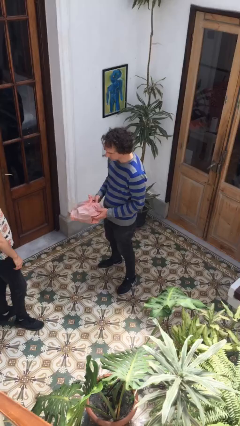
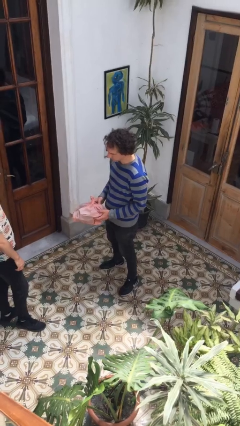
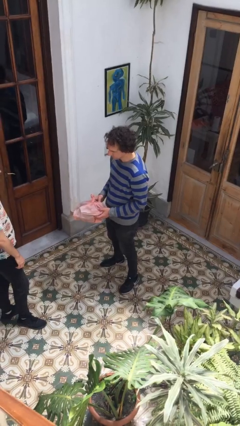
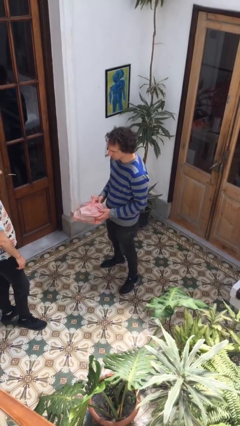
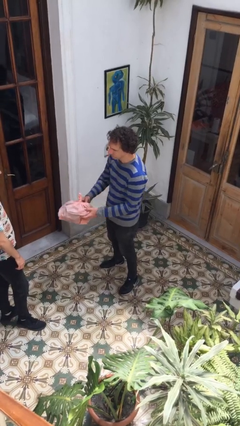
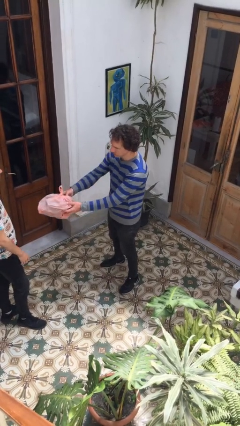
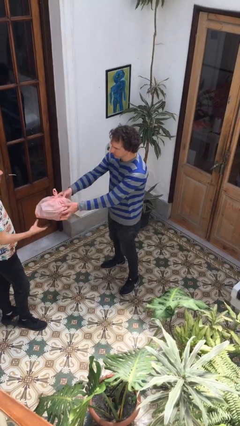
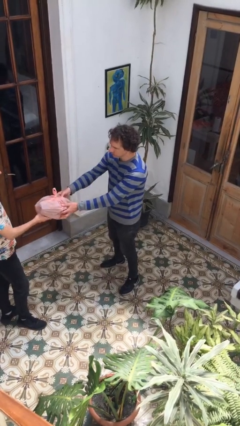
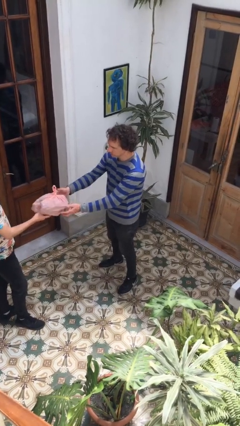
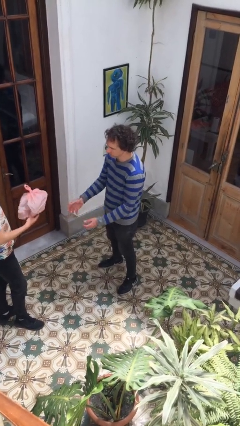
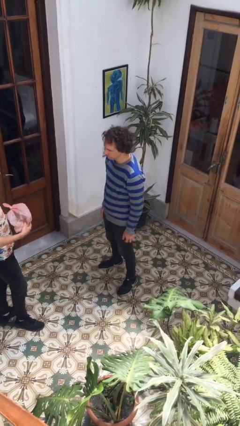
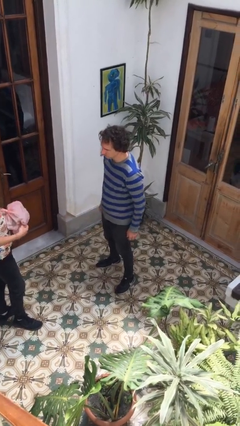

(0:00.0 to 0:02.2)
person transfers object to person

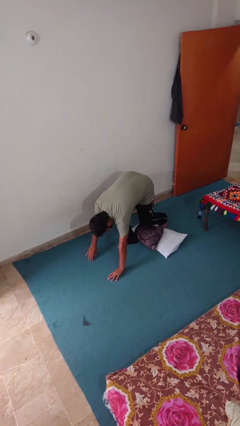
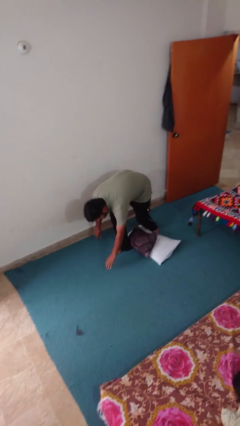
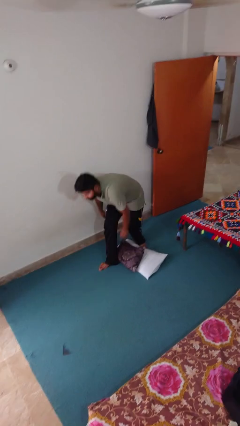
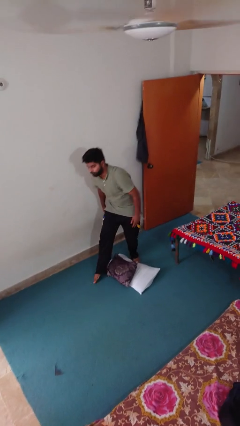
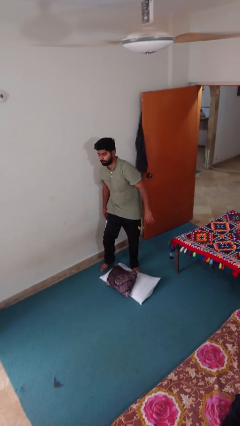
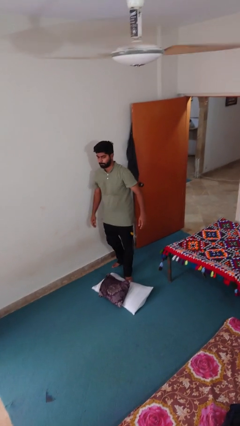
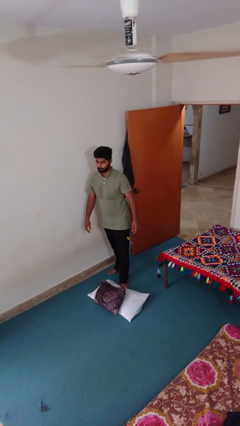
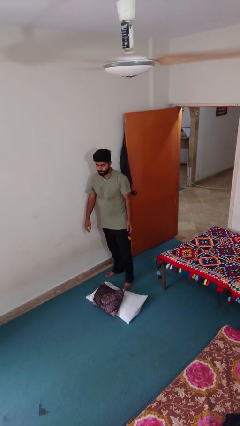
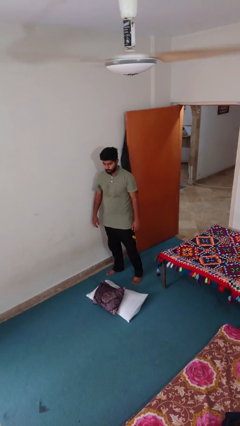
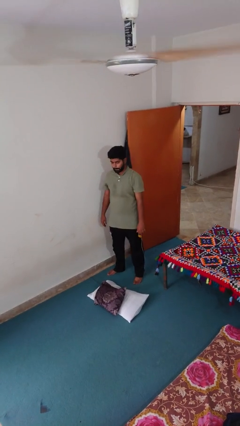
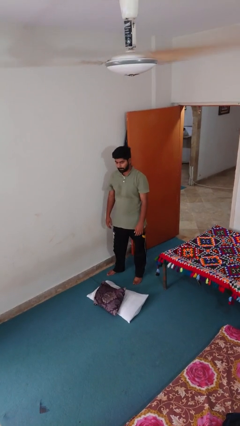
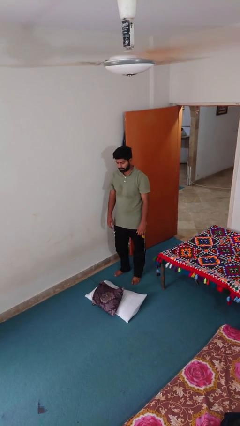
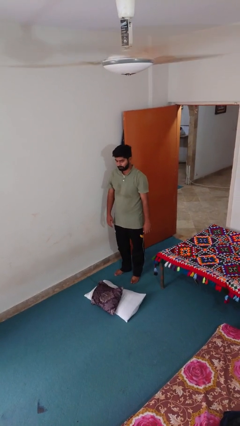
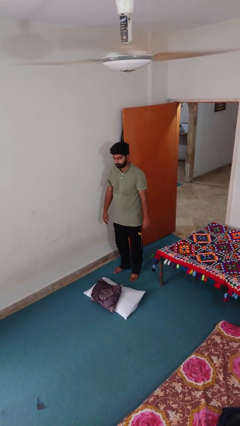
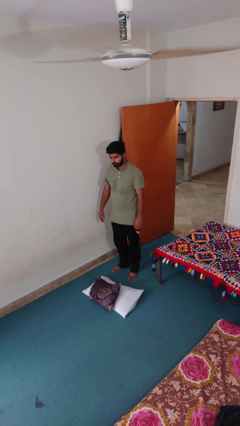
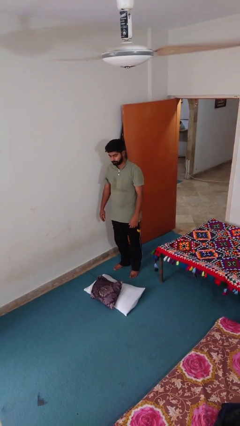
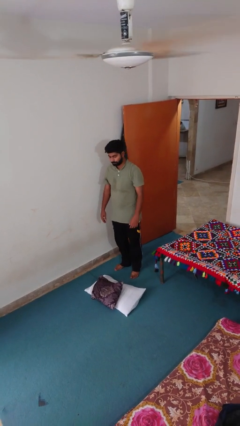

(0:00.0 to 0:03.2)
person stands up from floor

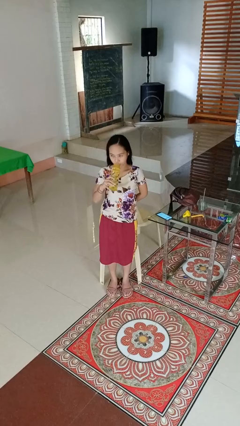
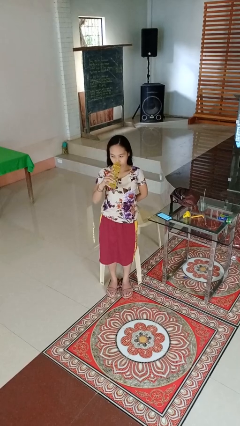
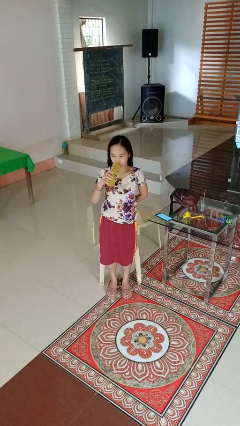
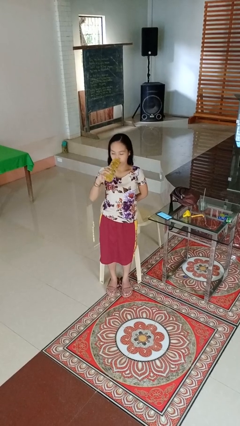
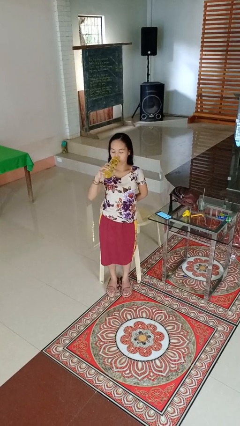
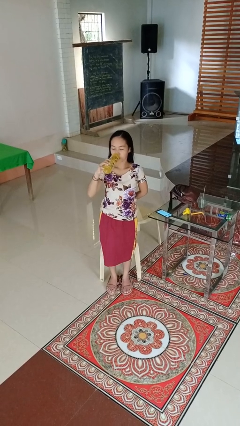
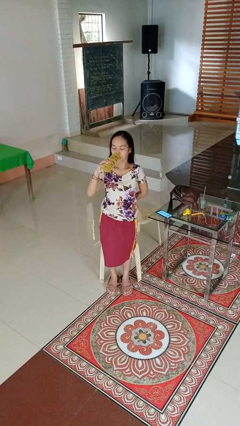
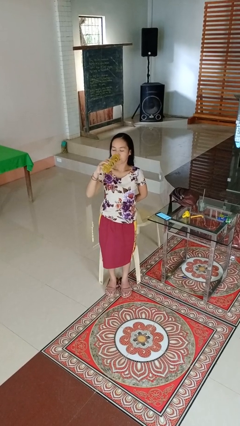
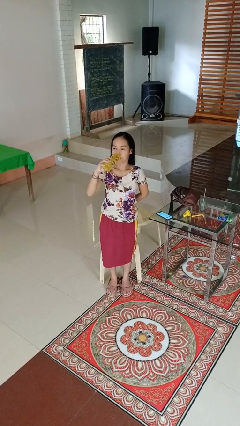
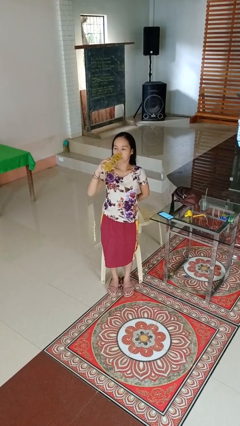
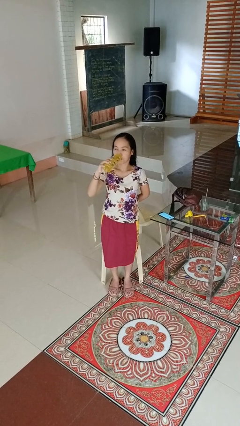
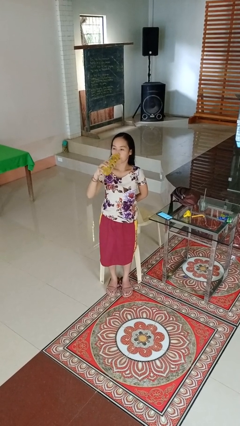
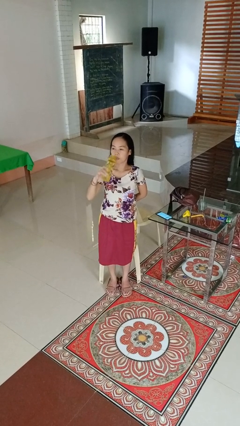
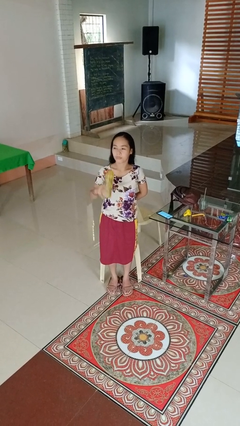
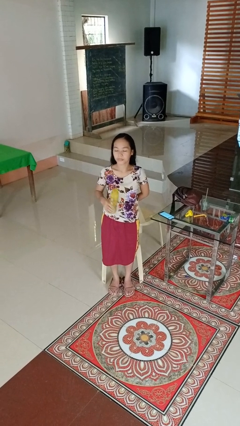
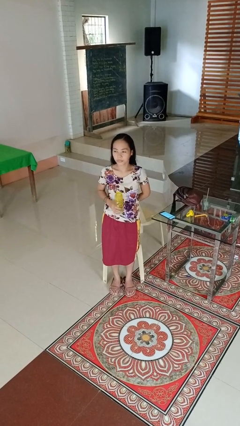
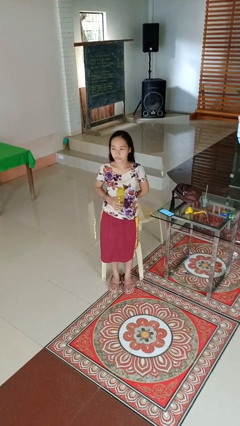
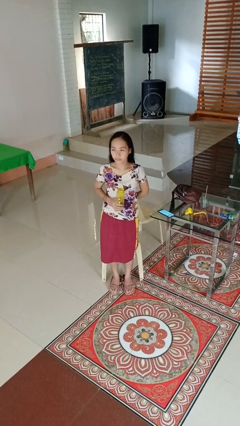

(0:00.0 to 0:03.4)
person drinks from bottle

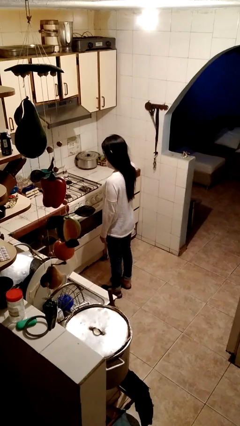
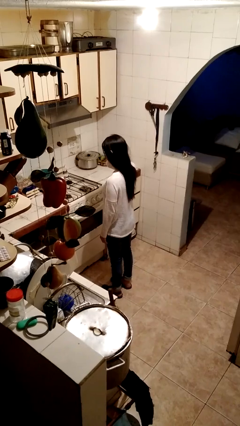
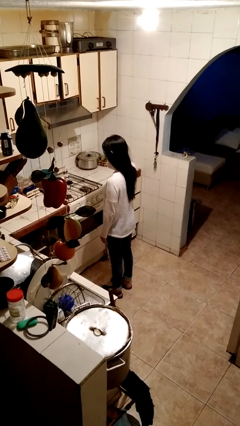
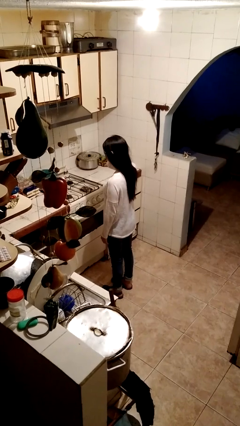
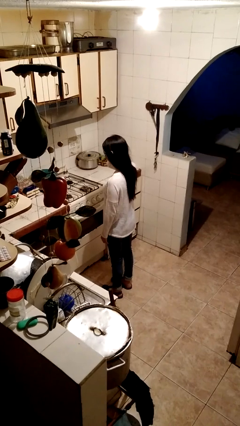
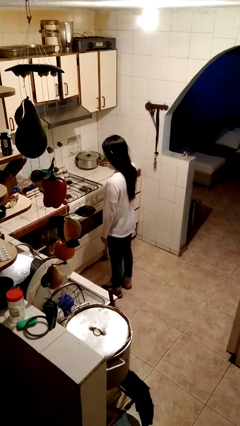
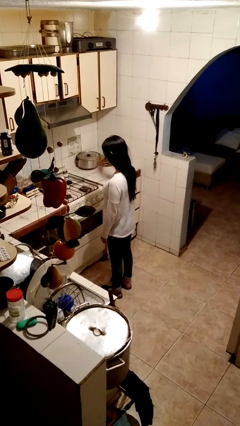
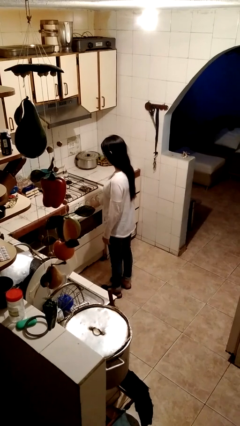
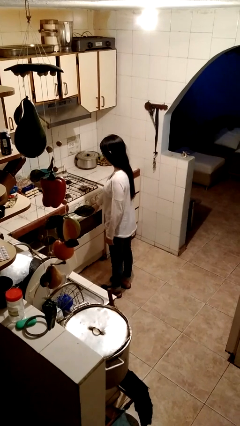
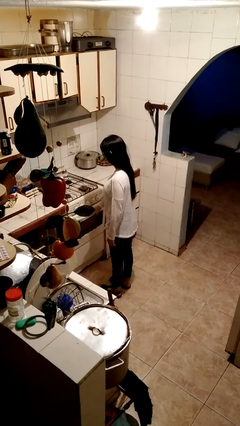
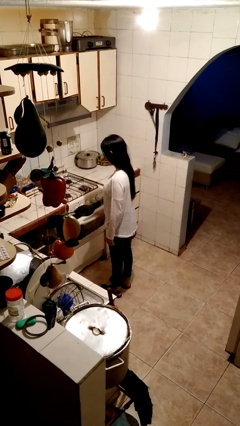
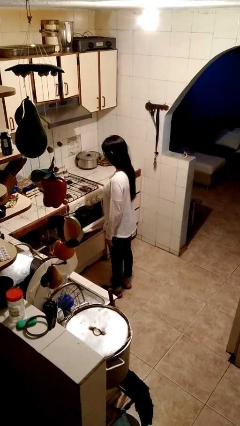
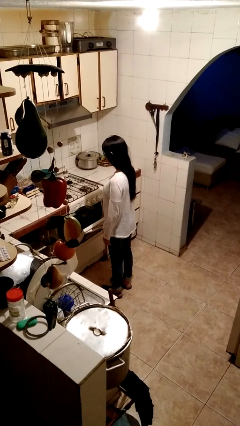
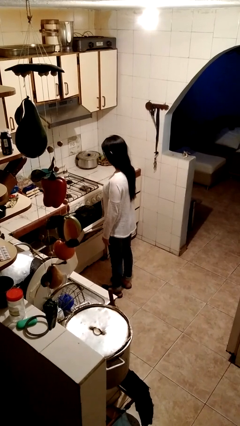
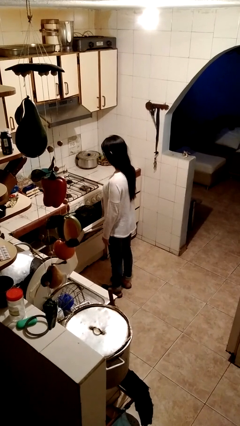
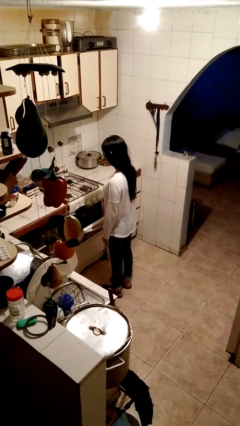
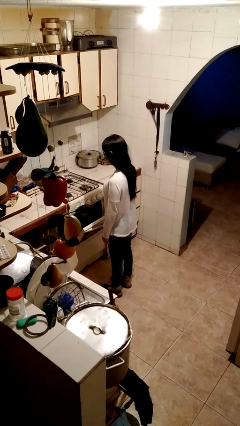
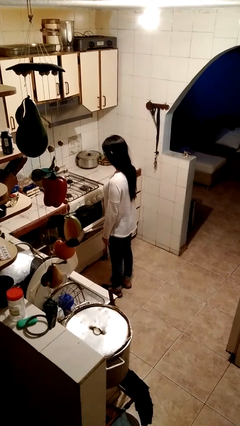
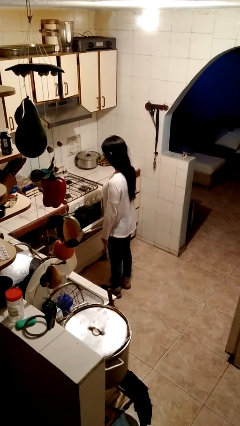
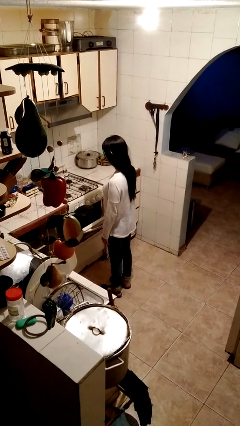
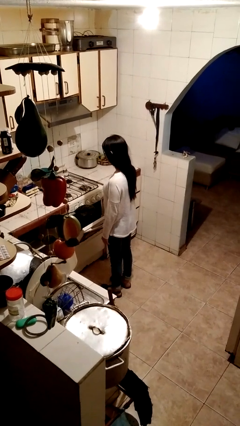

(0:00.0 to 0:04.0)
person opens oven door

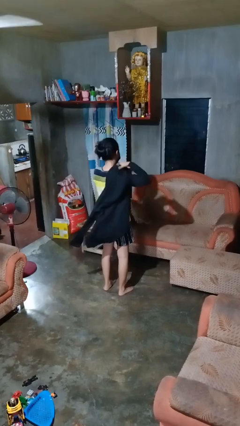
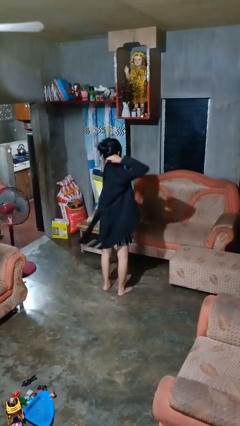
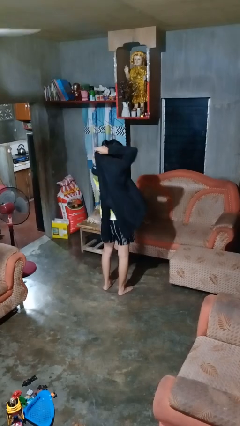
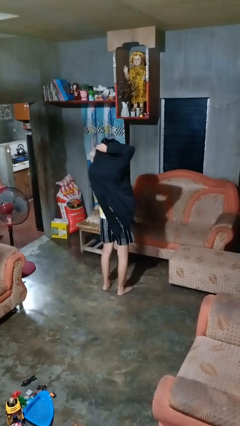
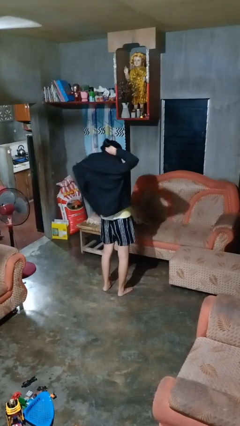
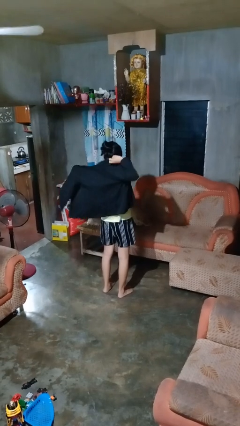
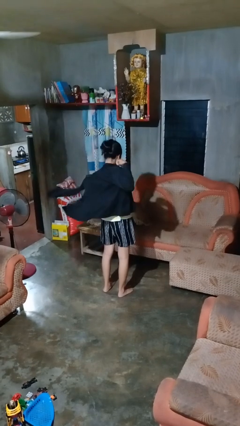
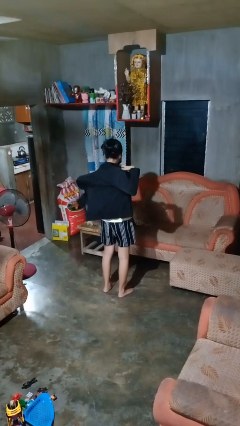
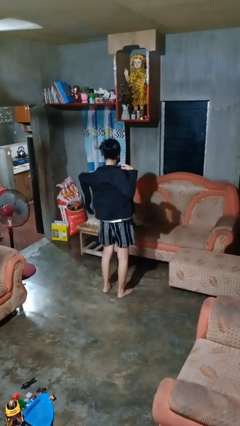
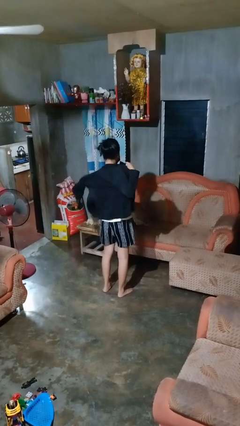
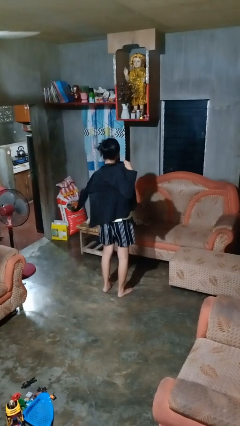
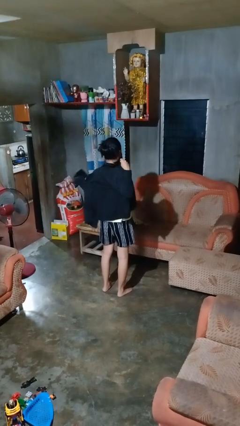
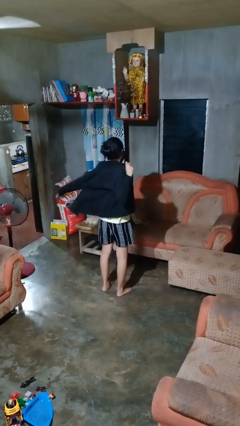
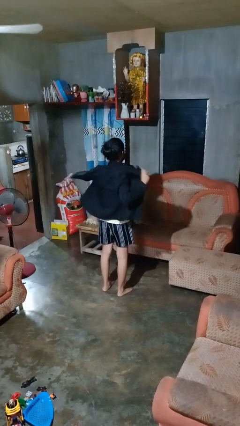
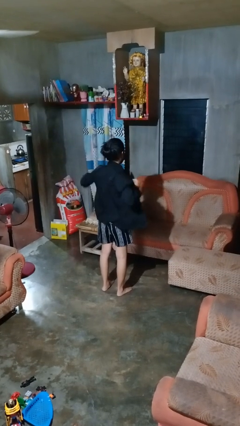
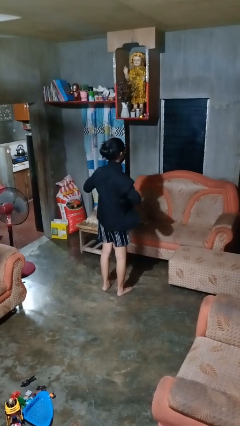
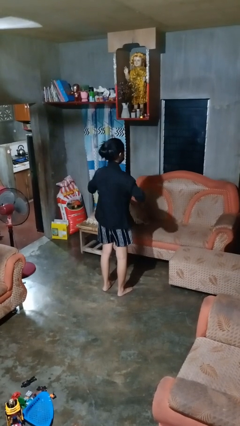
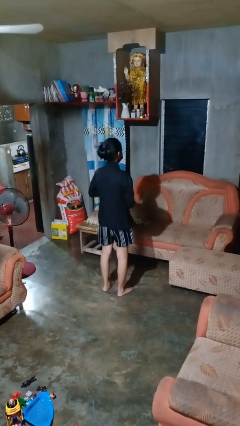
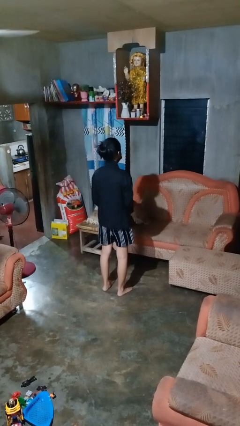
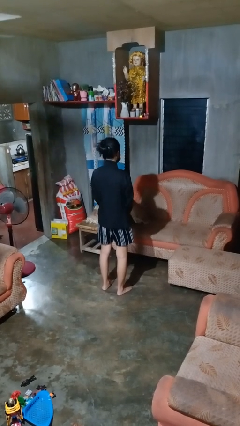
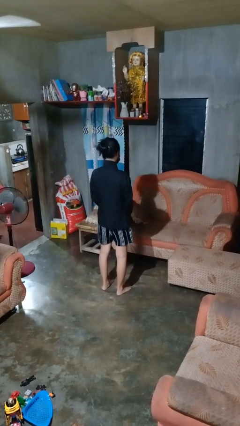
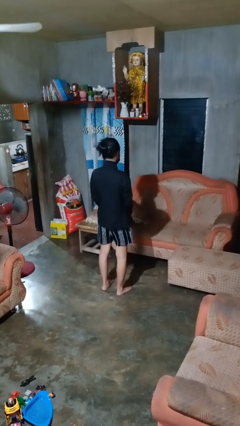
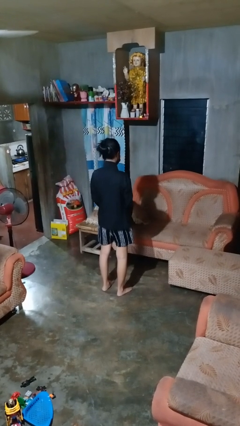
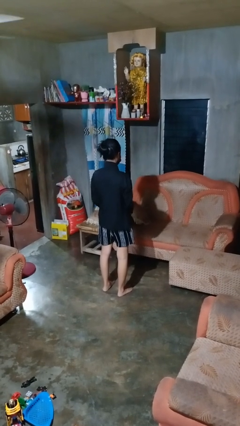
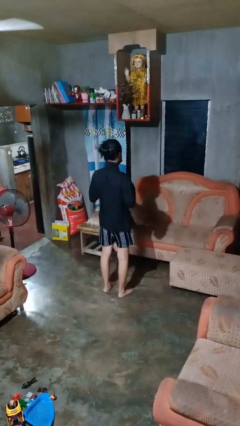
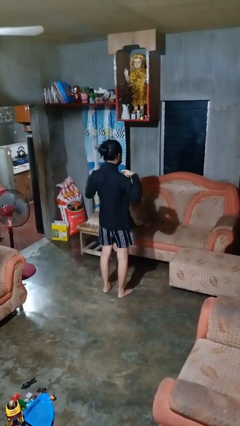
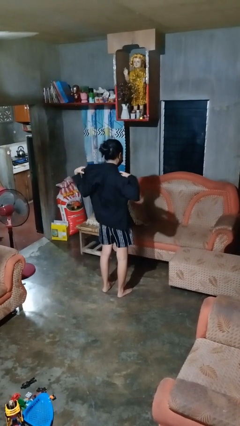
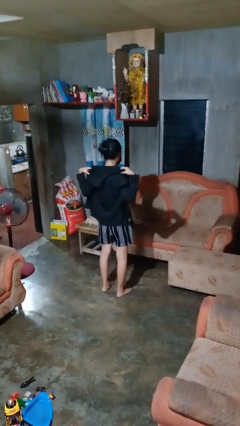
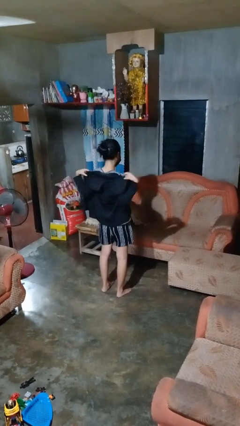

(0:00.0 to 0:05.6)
person puts on shirt
